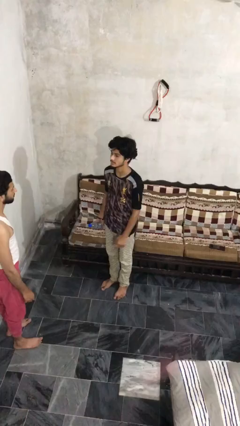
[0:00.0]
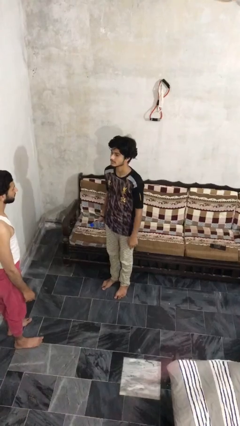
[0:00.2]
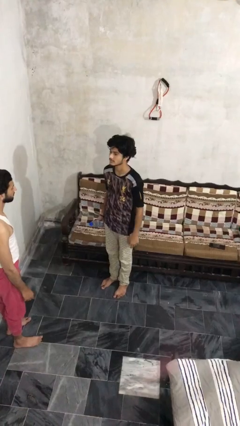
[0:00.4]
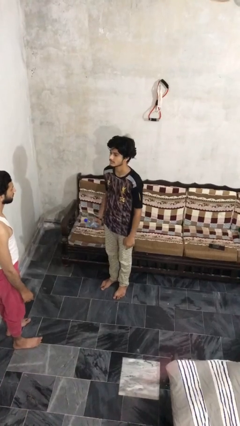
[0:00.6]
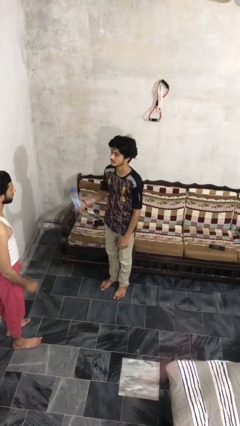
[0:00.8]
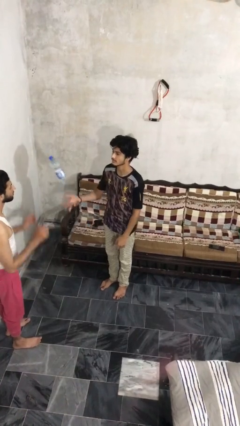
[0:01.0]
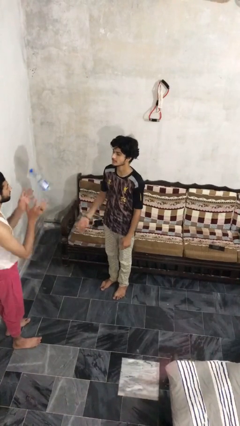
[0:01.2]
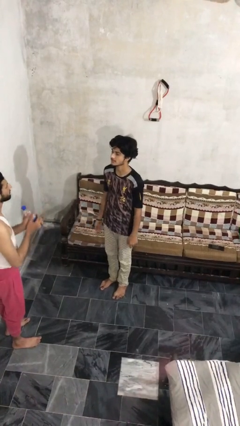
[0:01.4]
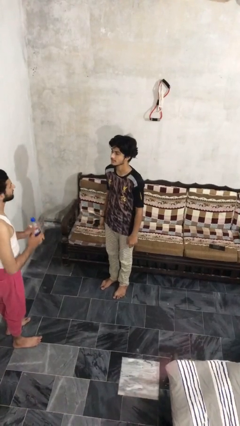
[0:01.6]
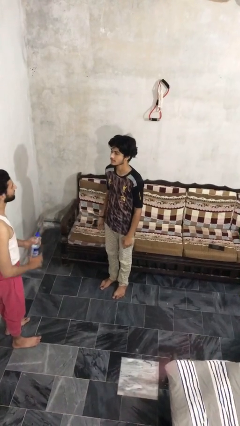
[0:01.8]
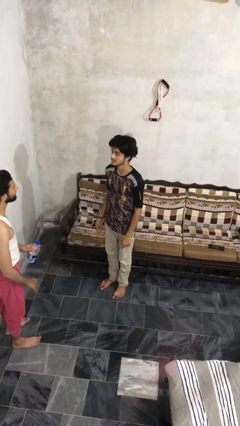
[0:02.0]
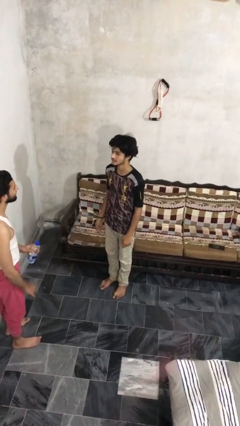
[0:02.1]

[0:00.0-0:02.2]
person throws object to person

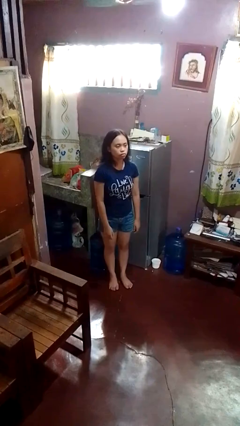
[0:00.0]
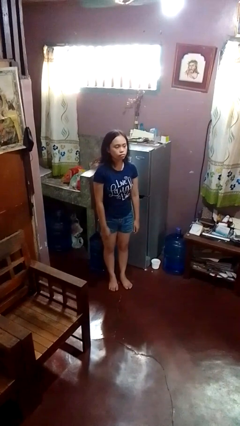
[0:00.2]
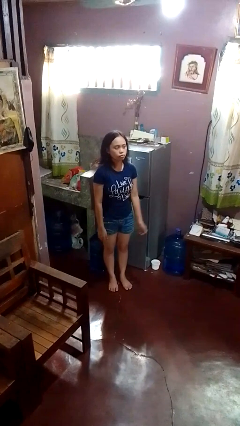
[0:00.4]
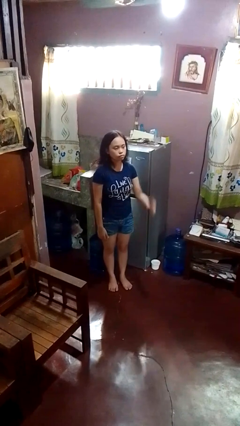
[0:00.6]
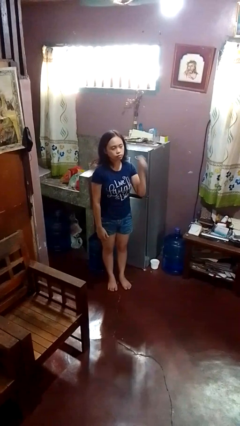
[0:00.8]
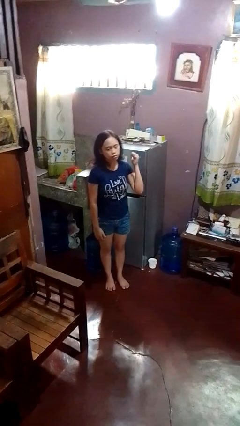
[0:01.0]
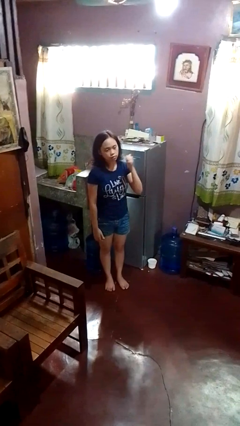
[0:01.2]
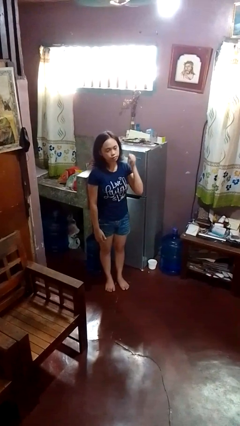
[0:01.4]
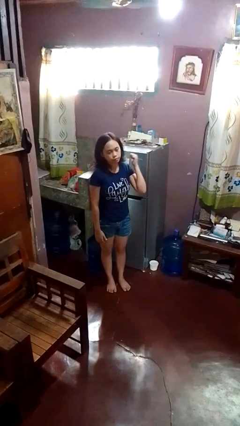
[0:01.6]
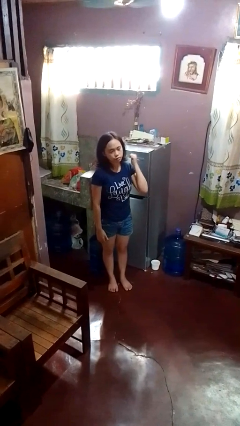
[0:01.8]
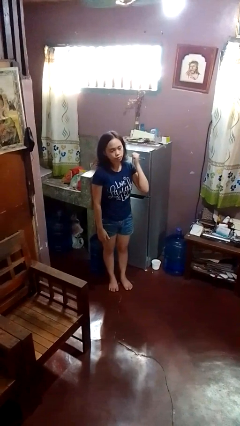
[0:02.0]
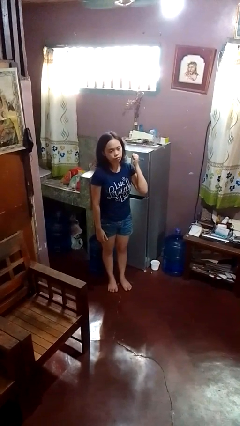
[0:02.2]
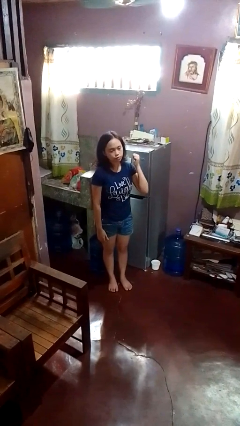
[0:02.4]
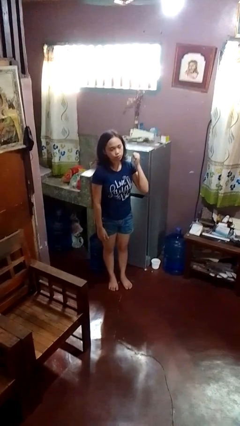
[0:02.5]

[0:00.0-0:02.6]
person gestures behind me

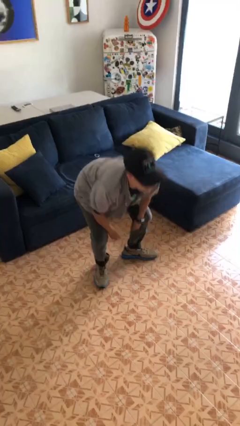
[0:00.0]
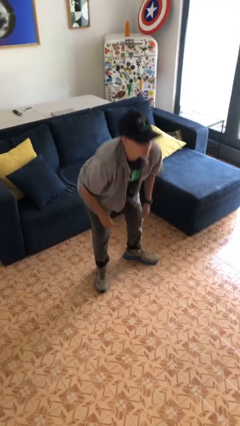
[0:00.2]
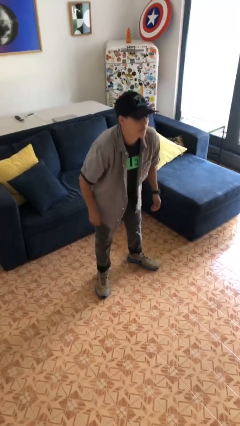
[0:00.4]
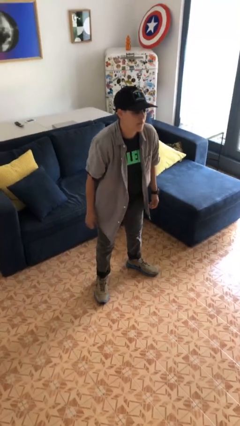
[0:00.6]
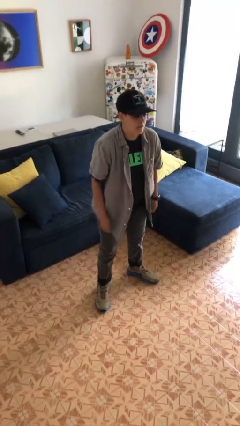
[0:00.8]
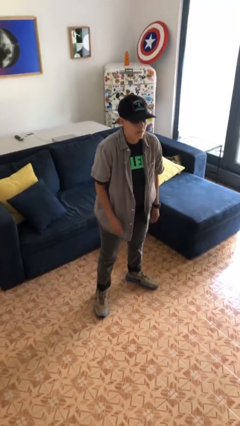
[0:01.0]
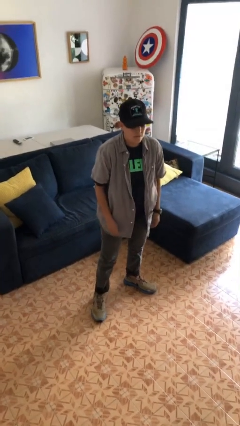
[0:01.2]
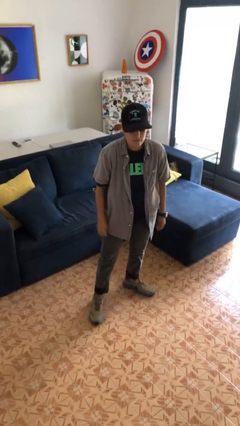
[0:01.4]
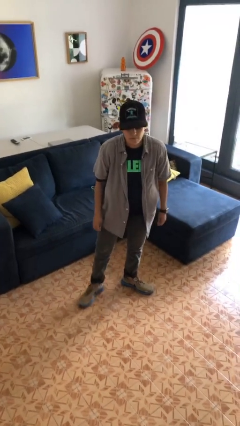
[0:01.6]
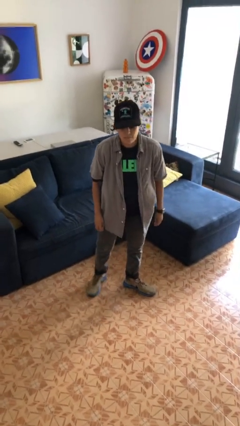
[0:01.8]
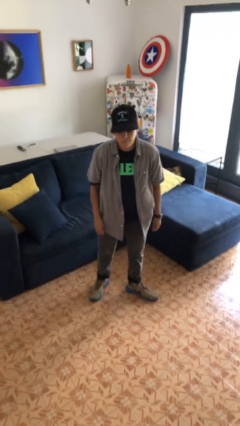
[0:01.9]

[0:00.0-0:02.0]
person stands up

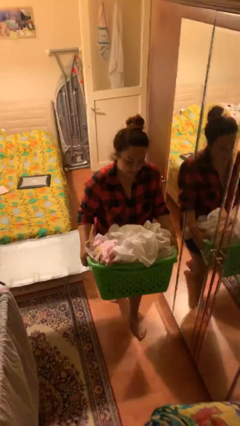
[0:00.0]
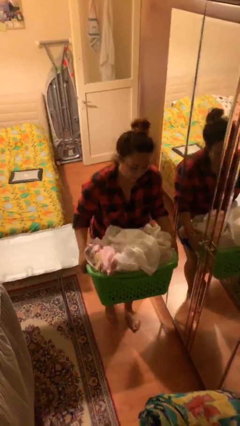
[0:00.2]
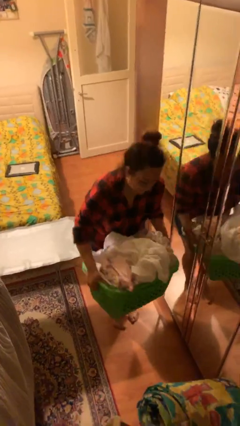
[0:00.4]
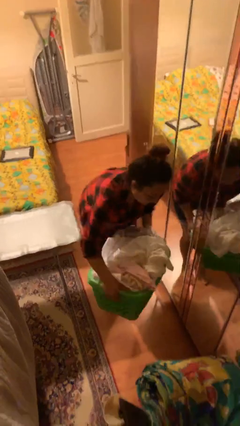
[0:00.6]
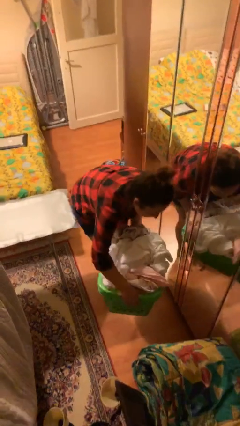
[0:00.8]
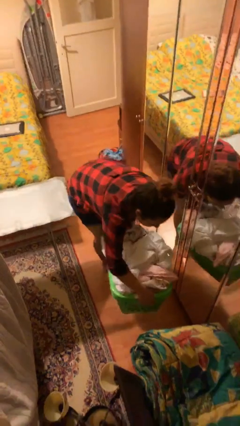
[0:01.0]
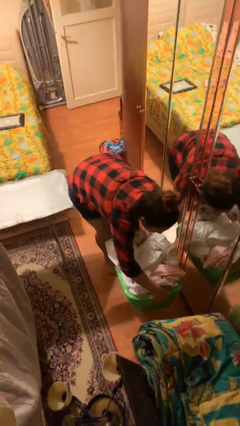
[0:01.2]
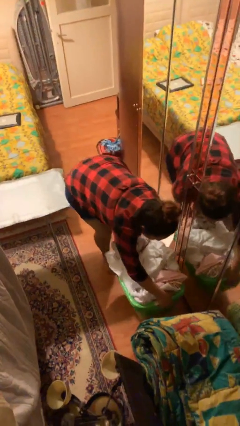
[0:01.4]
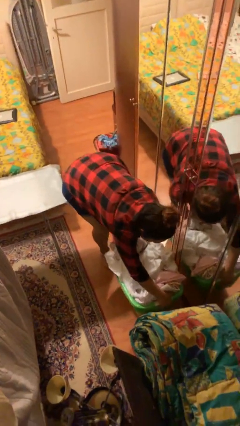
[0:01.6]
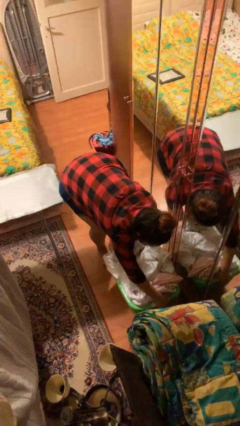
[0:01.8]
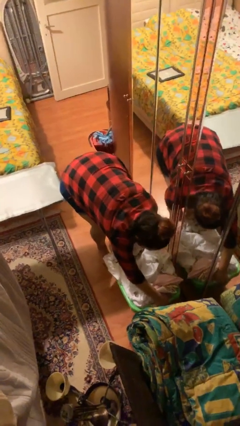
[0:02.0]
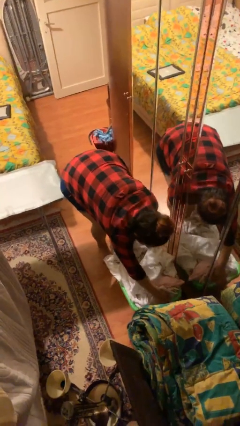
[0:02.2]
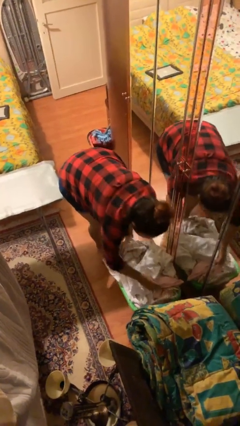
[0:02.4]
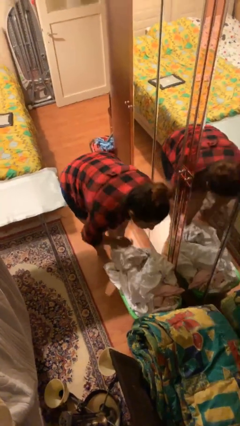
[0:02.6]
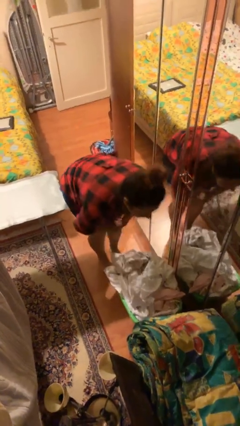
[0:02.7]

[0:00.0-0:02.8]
person puts down object on floor

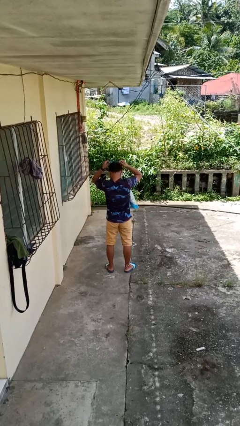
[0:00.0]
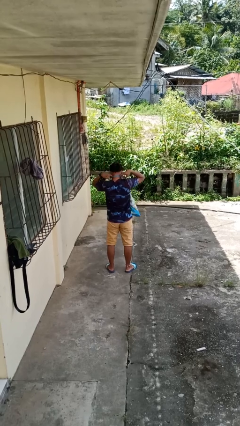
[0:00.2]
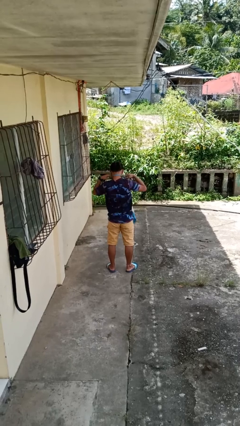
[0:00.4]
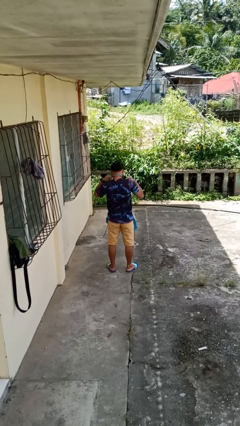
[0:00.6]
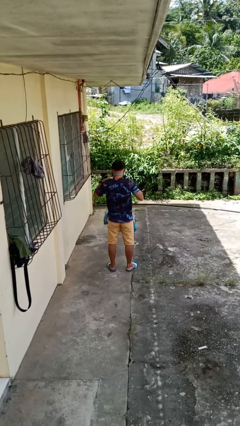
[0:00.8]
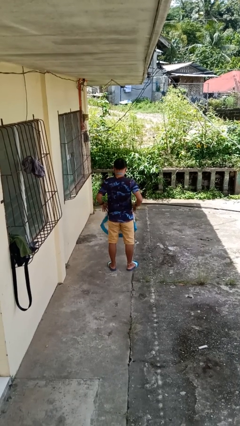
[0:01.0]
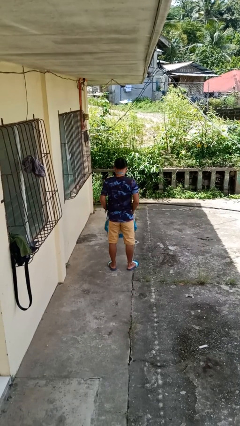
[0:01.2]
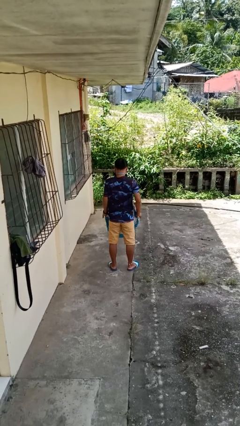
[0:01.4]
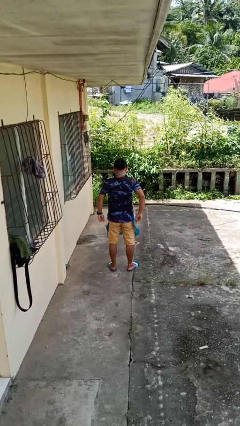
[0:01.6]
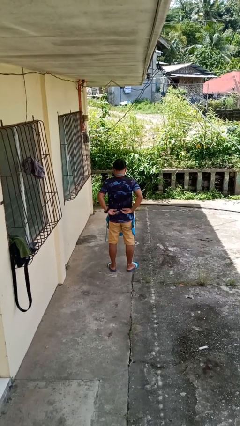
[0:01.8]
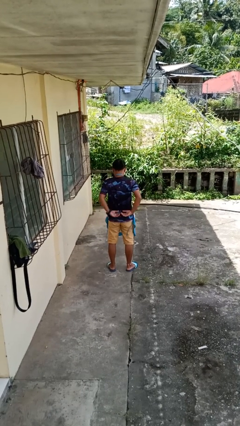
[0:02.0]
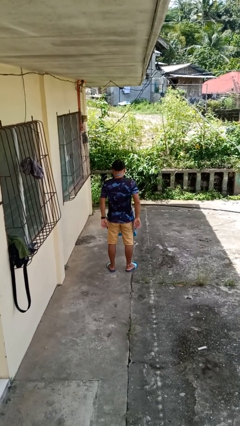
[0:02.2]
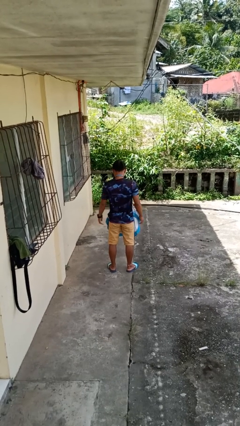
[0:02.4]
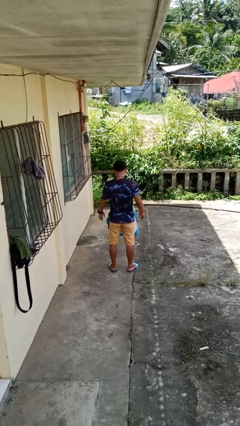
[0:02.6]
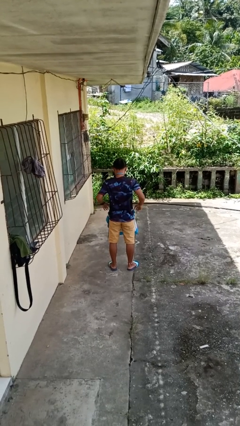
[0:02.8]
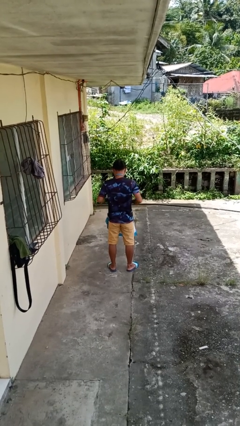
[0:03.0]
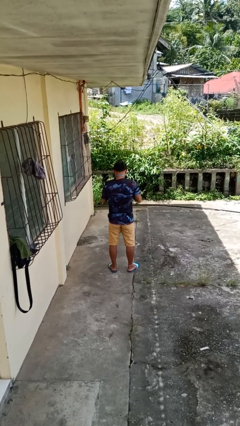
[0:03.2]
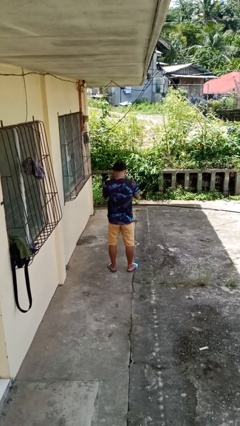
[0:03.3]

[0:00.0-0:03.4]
person puts on apron

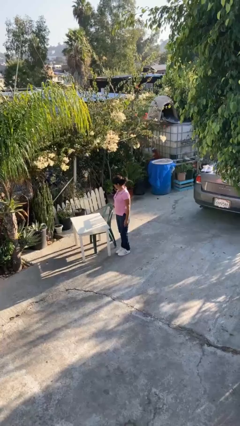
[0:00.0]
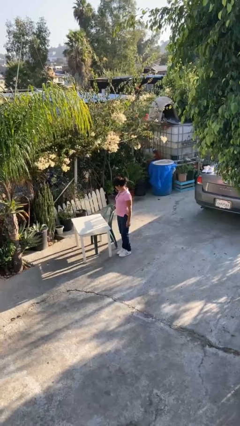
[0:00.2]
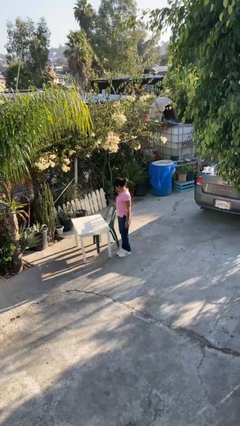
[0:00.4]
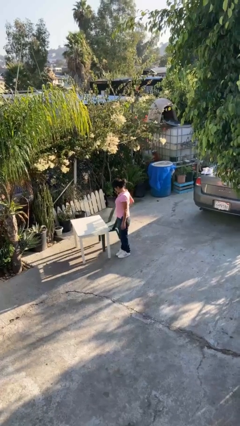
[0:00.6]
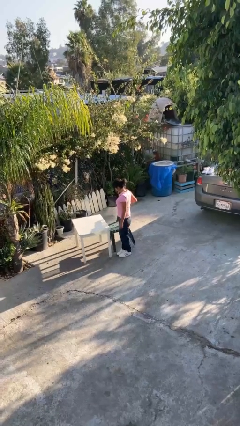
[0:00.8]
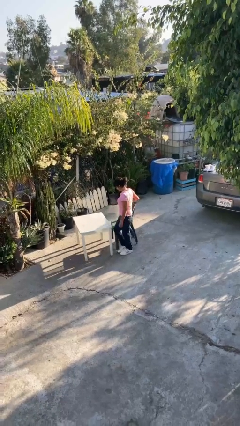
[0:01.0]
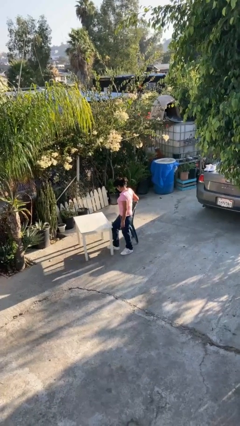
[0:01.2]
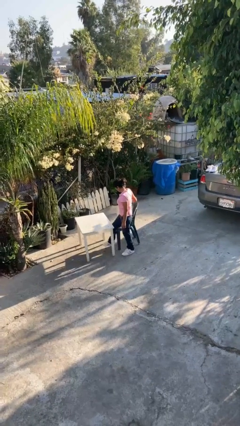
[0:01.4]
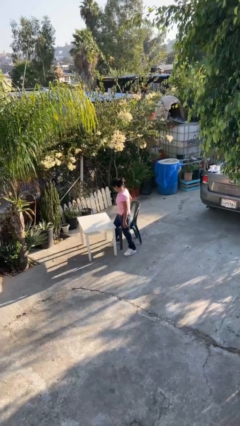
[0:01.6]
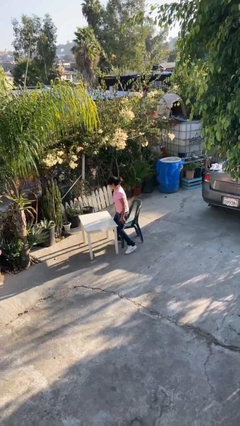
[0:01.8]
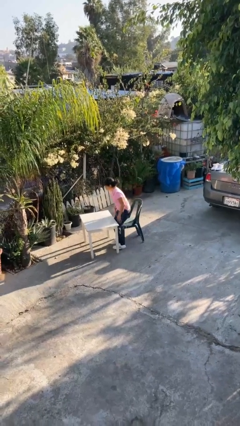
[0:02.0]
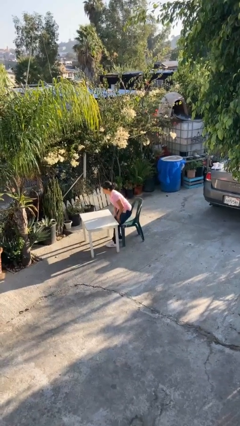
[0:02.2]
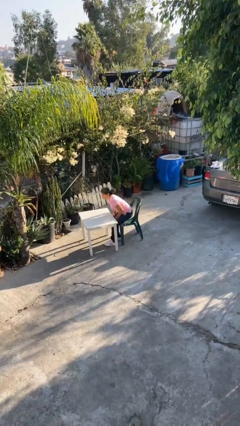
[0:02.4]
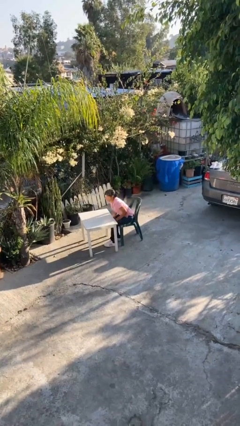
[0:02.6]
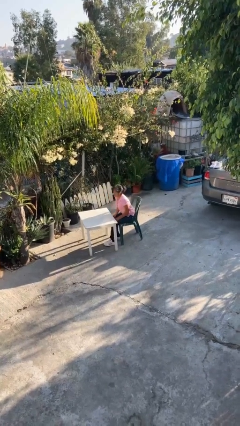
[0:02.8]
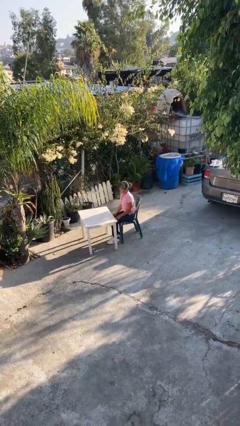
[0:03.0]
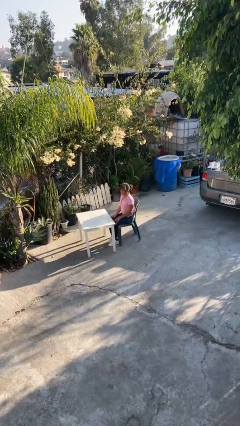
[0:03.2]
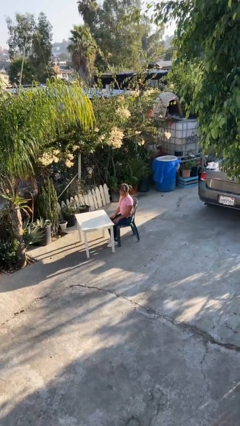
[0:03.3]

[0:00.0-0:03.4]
person sits down

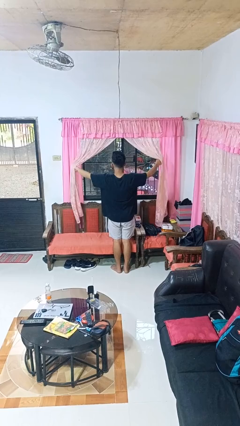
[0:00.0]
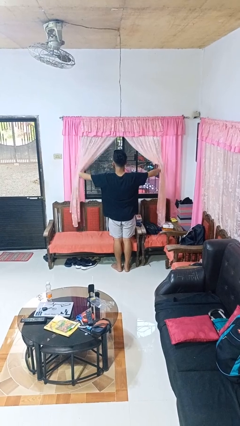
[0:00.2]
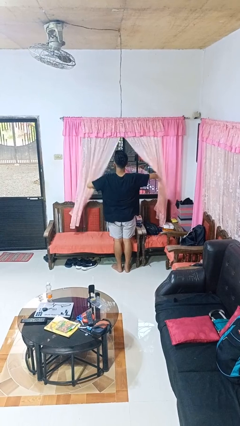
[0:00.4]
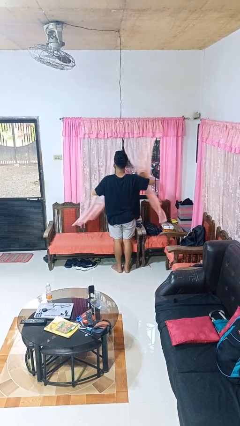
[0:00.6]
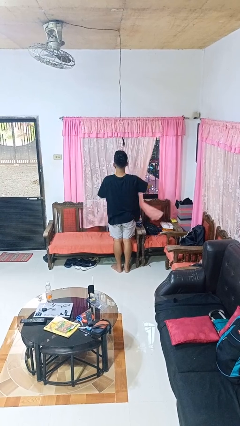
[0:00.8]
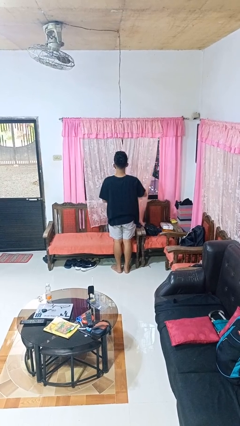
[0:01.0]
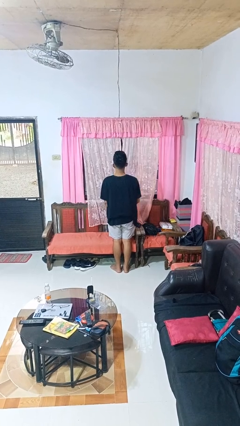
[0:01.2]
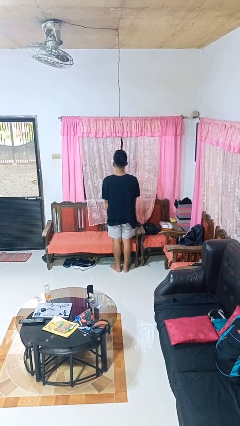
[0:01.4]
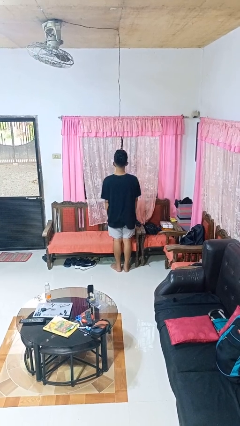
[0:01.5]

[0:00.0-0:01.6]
person closes curtains
